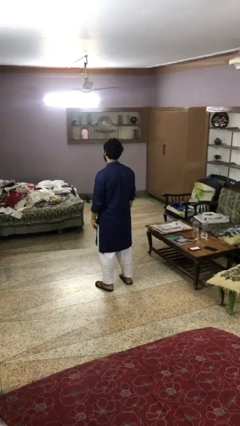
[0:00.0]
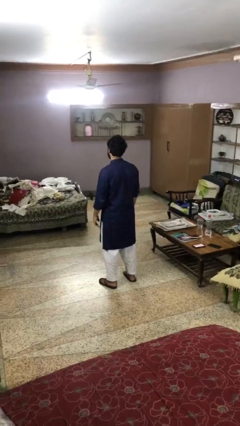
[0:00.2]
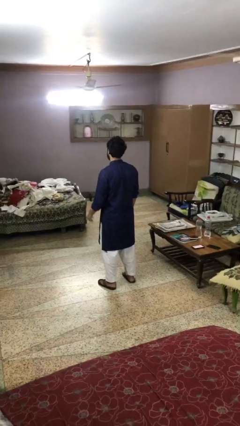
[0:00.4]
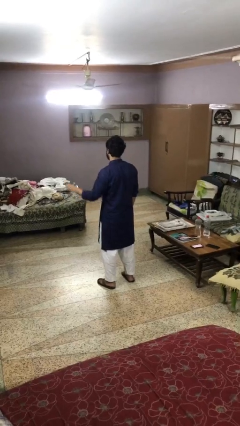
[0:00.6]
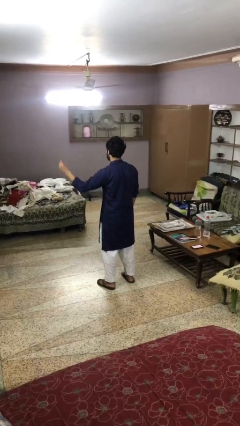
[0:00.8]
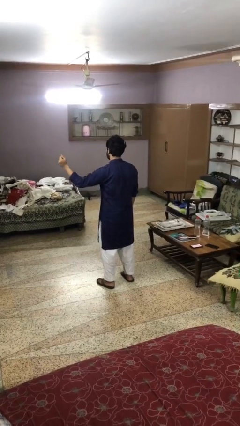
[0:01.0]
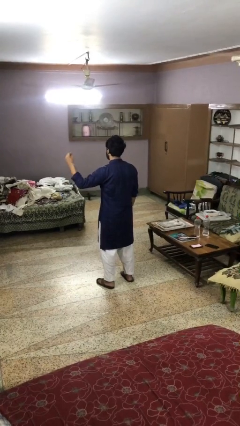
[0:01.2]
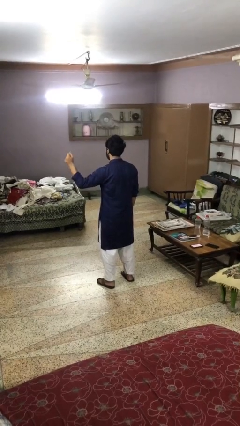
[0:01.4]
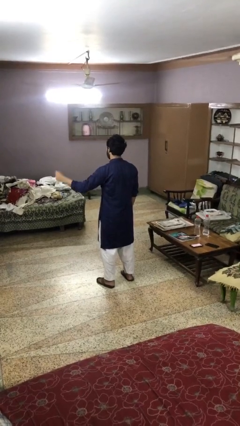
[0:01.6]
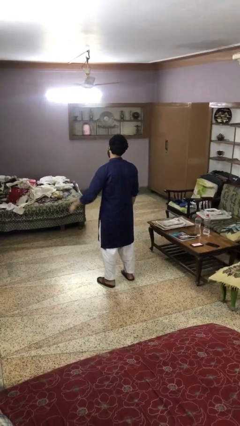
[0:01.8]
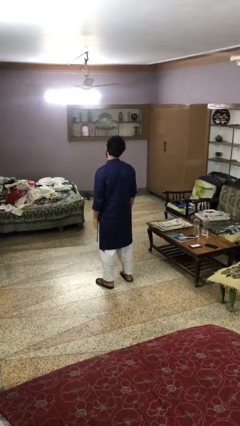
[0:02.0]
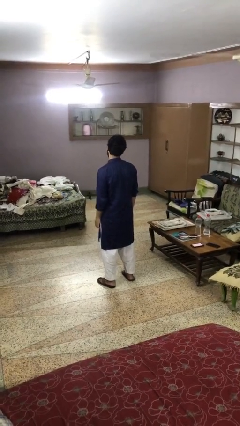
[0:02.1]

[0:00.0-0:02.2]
person snaps fingers

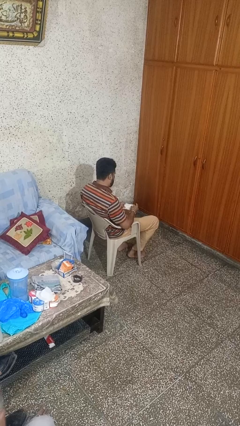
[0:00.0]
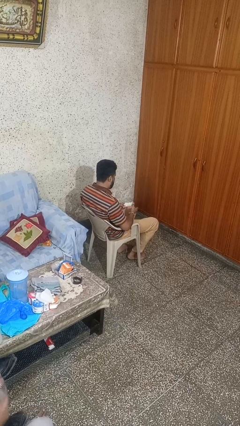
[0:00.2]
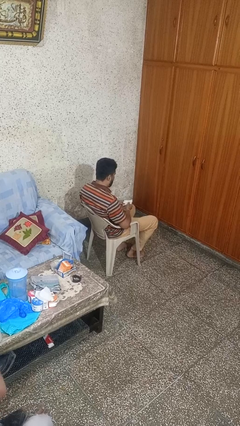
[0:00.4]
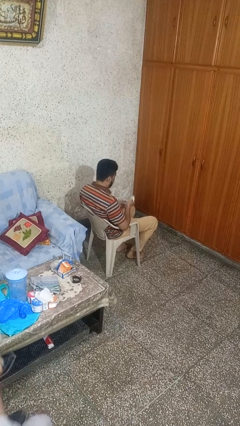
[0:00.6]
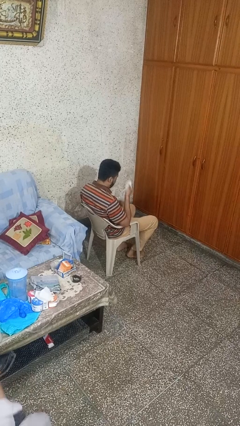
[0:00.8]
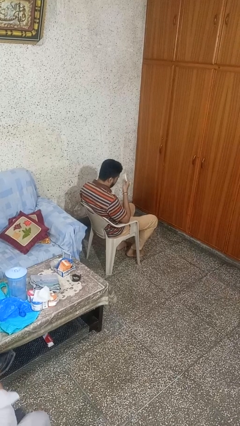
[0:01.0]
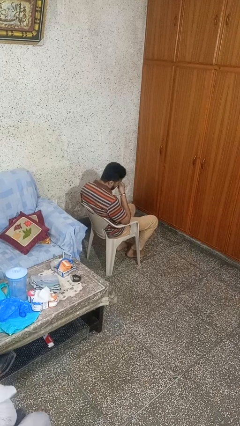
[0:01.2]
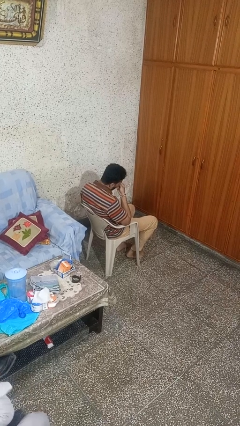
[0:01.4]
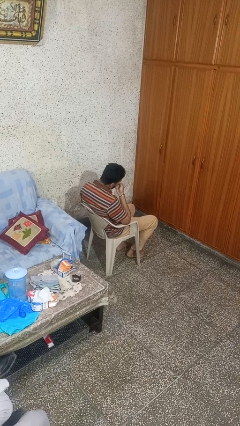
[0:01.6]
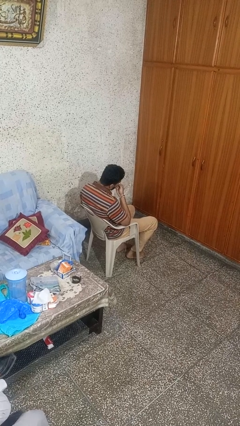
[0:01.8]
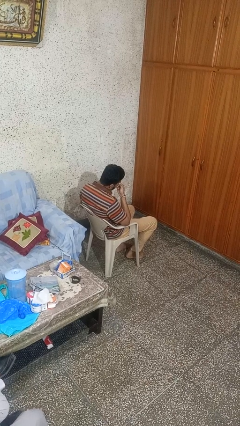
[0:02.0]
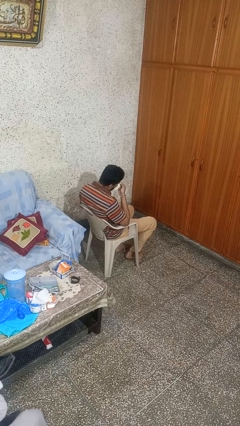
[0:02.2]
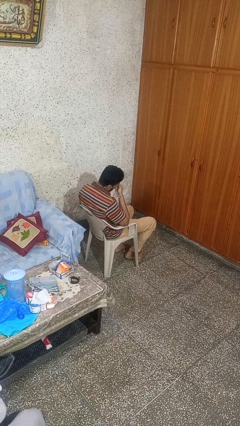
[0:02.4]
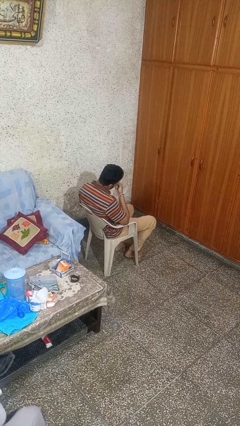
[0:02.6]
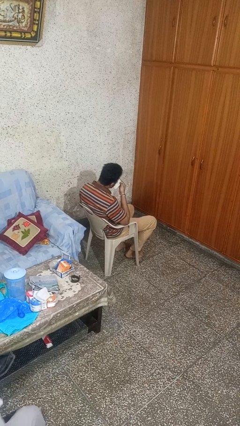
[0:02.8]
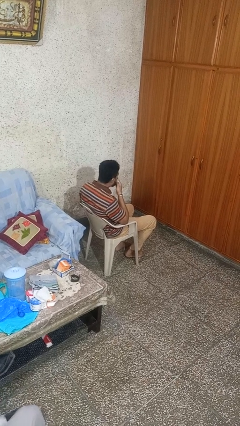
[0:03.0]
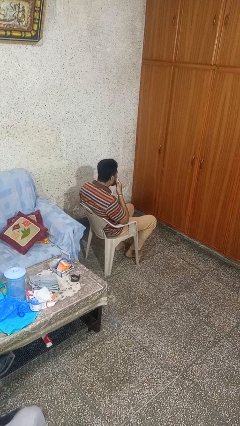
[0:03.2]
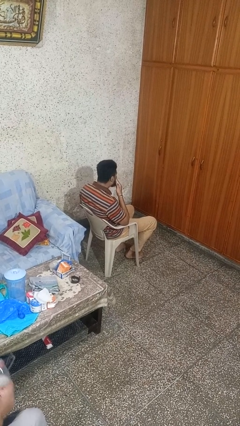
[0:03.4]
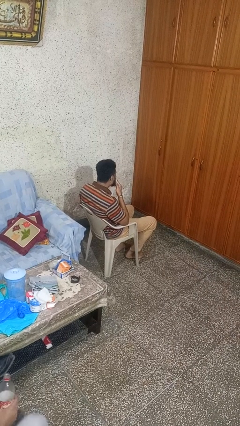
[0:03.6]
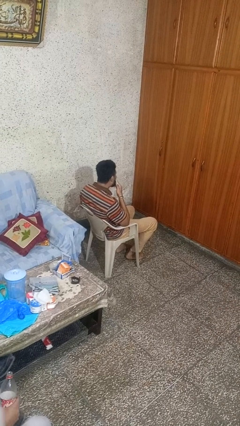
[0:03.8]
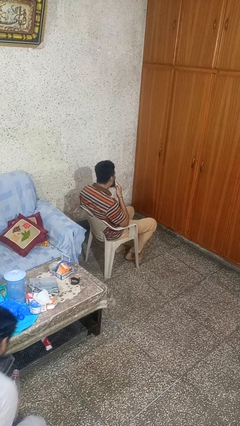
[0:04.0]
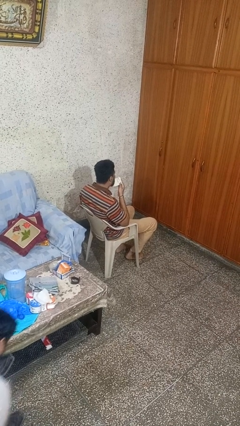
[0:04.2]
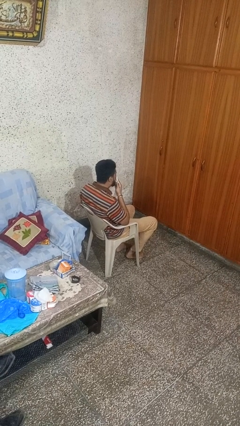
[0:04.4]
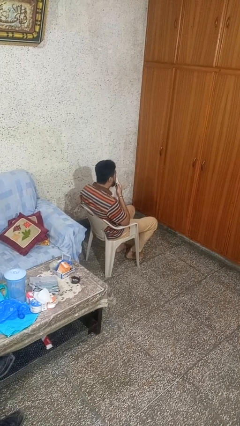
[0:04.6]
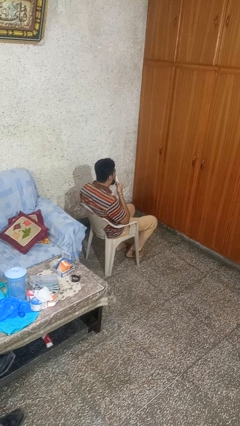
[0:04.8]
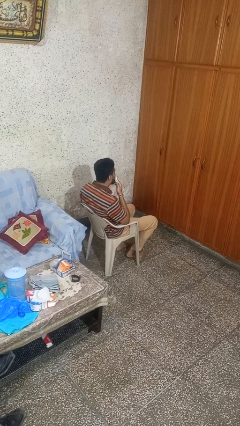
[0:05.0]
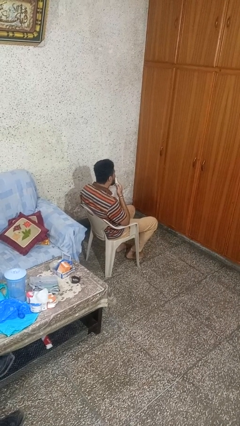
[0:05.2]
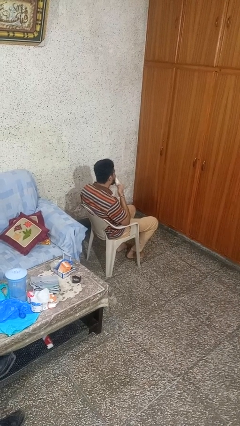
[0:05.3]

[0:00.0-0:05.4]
person wipes mouth with napkin

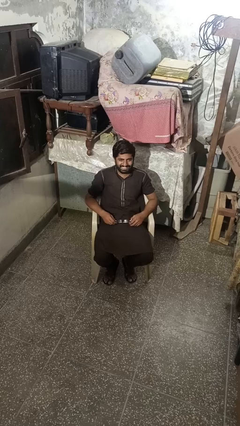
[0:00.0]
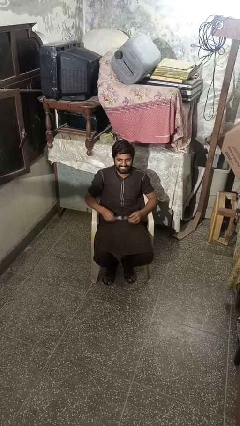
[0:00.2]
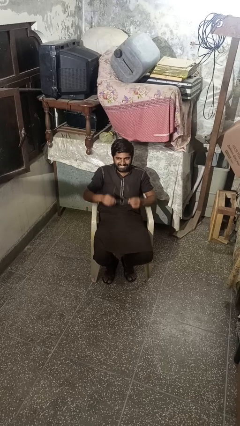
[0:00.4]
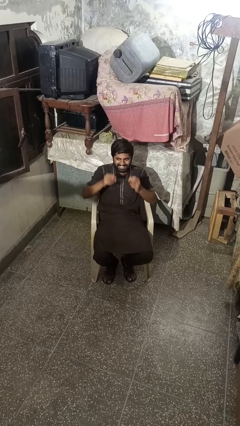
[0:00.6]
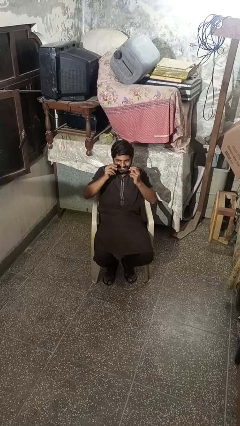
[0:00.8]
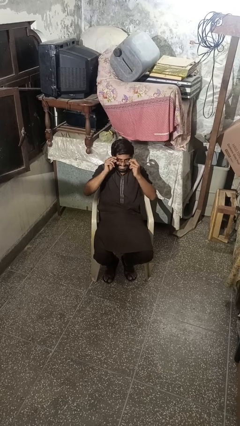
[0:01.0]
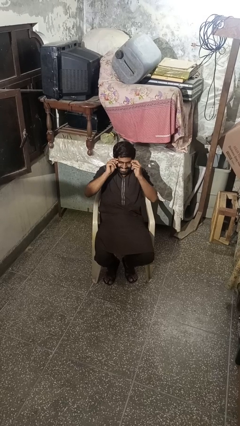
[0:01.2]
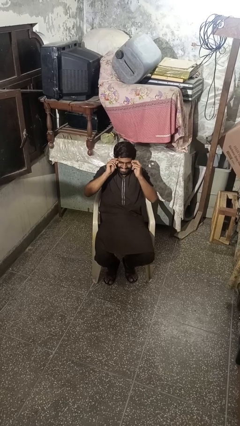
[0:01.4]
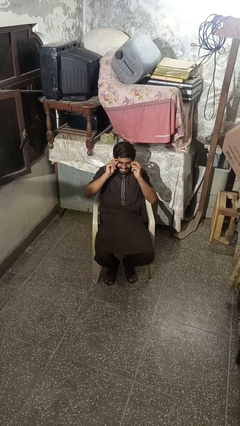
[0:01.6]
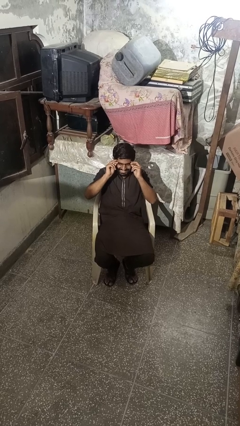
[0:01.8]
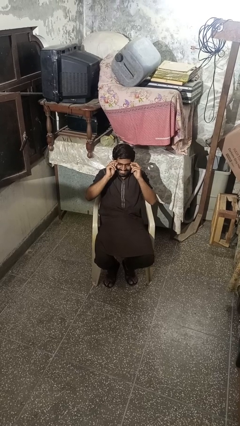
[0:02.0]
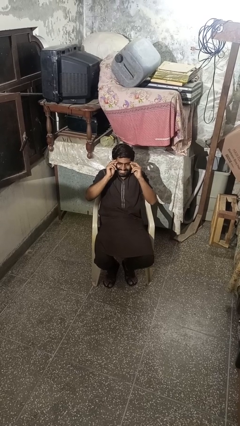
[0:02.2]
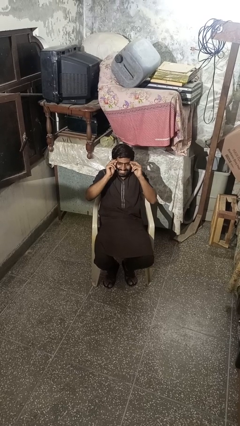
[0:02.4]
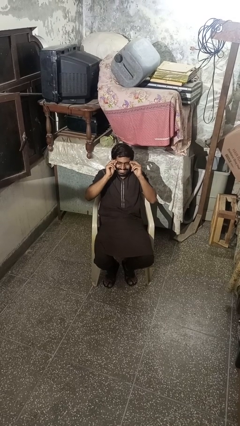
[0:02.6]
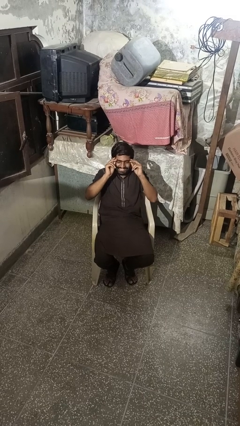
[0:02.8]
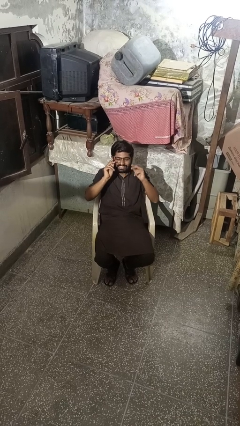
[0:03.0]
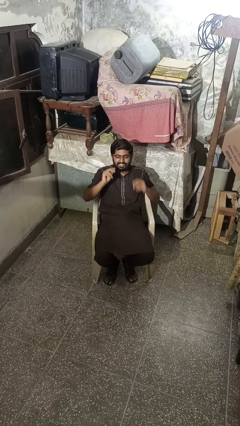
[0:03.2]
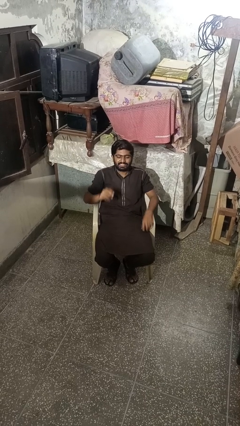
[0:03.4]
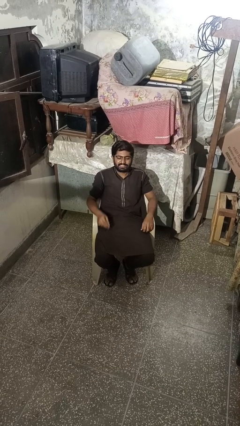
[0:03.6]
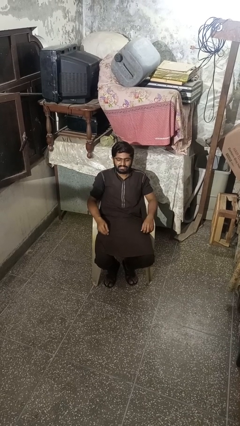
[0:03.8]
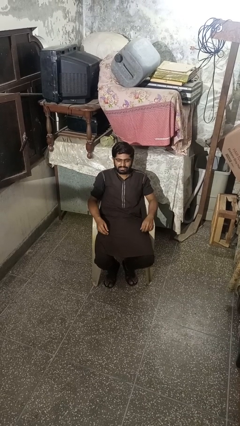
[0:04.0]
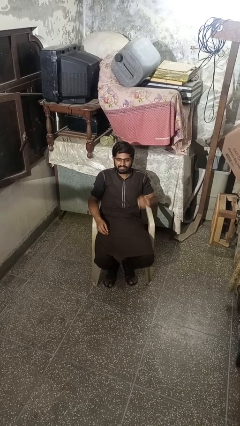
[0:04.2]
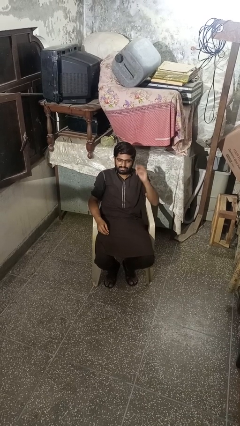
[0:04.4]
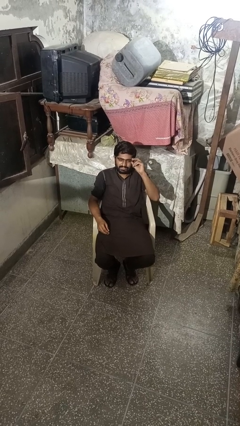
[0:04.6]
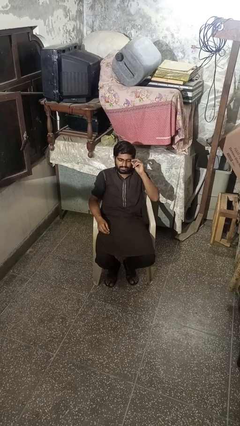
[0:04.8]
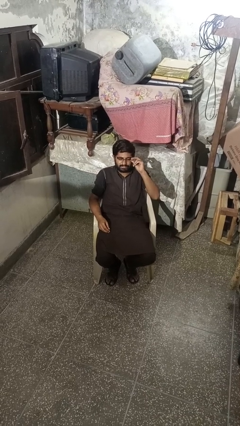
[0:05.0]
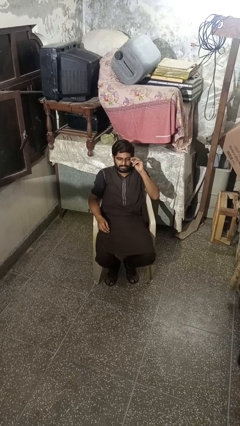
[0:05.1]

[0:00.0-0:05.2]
person puts on glasses

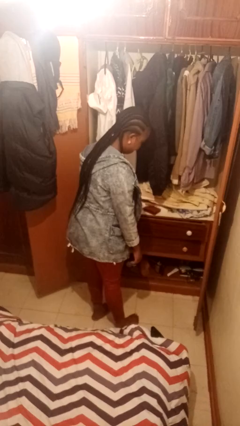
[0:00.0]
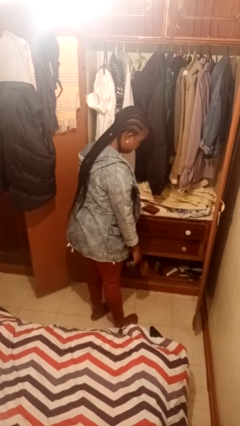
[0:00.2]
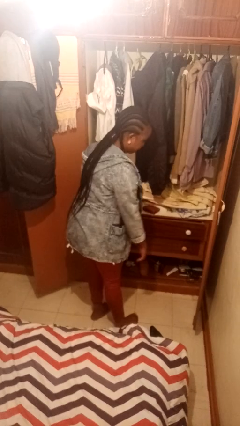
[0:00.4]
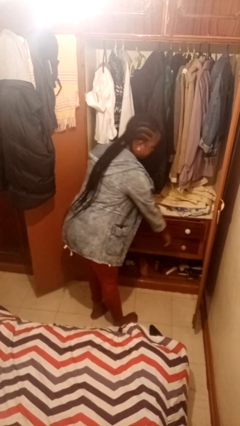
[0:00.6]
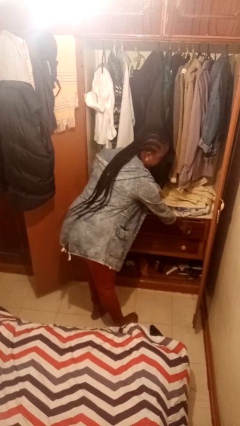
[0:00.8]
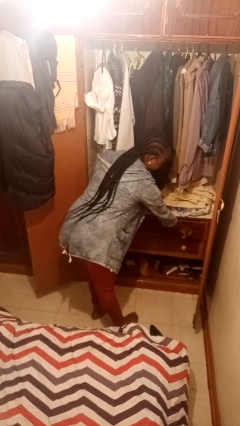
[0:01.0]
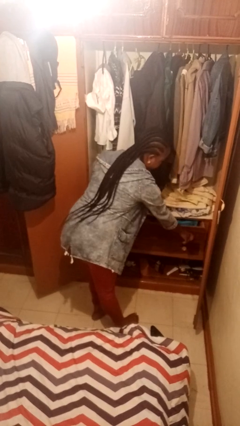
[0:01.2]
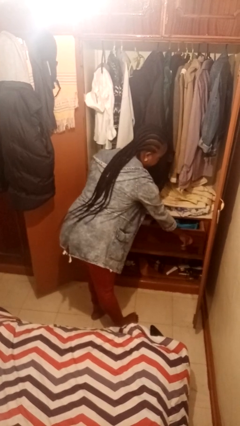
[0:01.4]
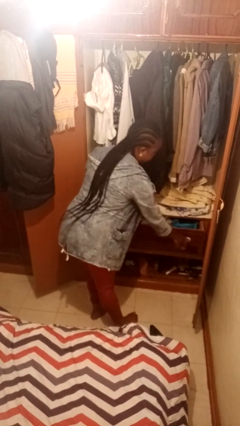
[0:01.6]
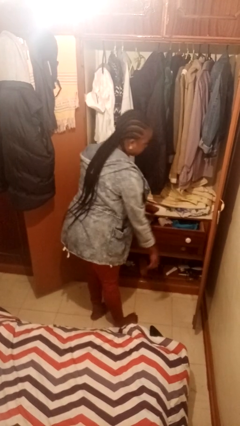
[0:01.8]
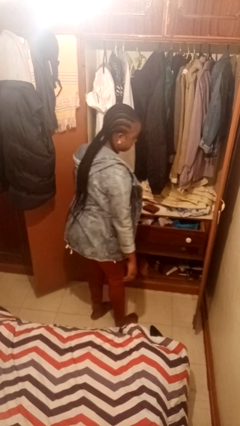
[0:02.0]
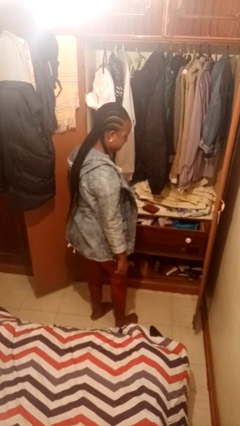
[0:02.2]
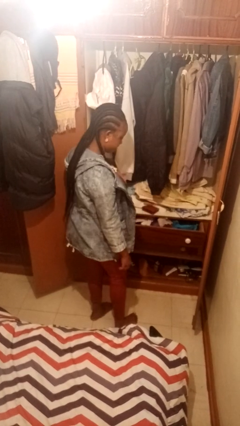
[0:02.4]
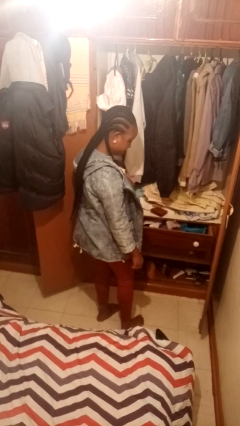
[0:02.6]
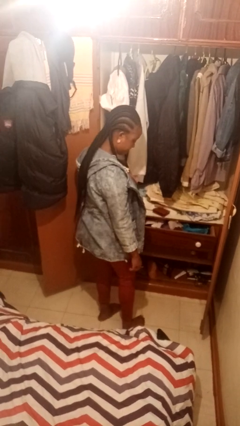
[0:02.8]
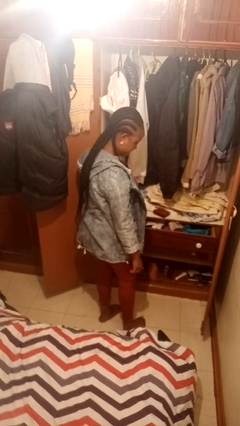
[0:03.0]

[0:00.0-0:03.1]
person opens dresser drawer

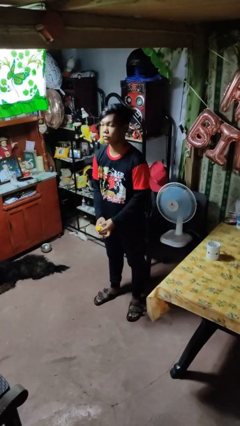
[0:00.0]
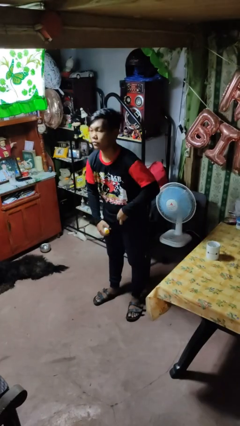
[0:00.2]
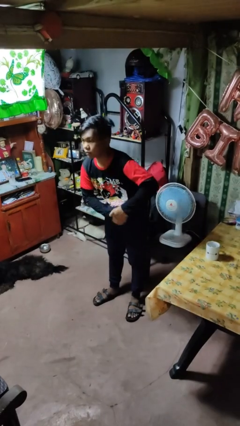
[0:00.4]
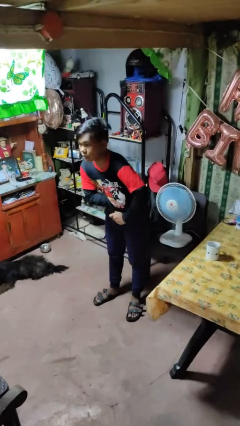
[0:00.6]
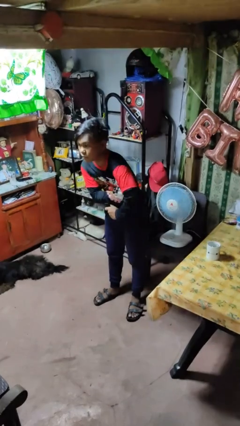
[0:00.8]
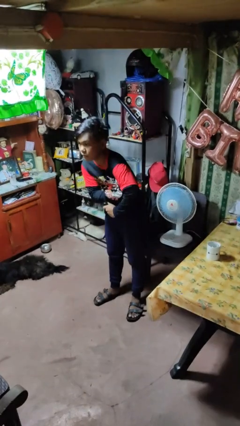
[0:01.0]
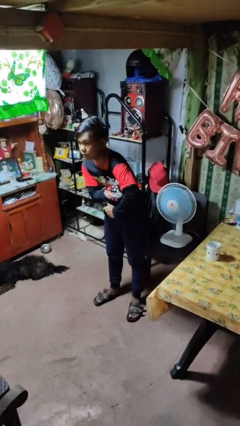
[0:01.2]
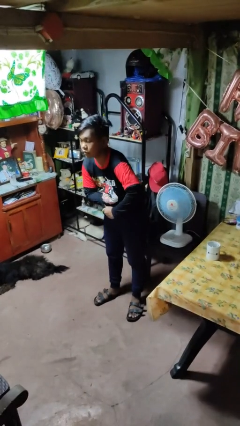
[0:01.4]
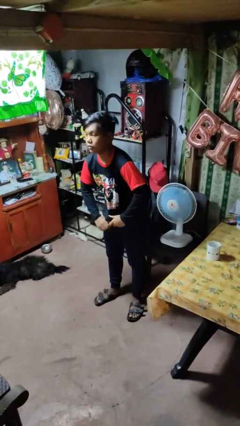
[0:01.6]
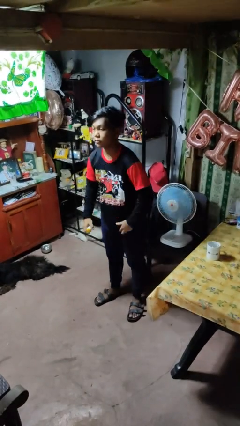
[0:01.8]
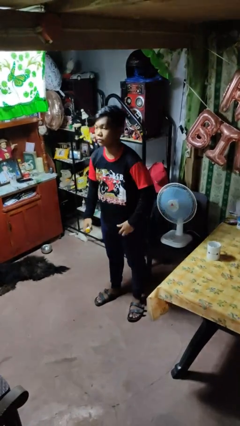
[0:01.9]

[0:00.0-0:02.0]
person applies deodorant
